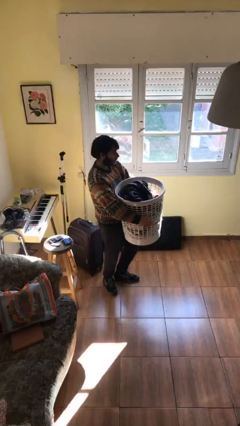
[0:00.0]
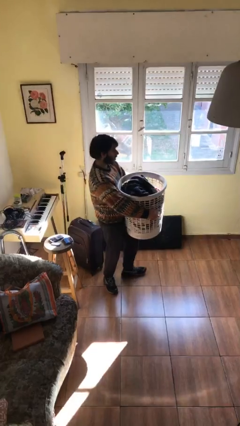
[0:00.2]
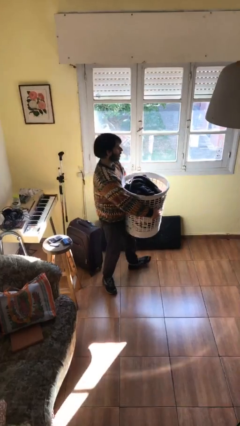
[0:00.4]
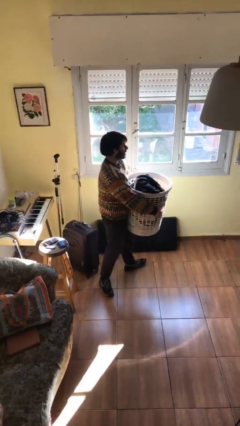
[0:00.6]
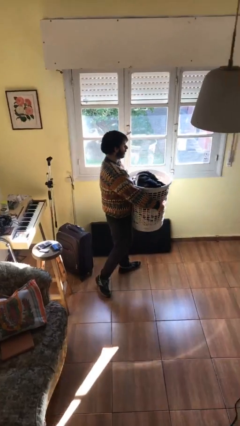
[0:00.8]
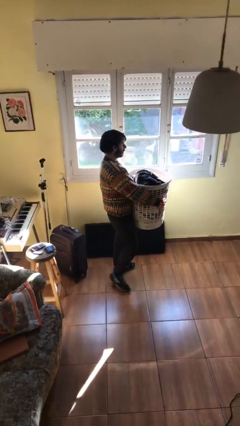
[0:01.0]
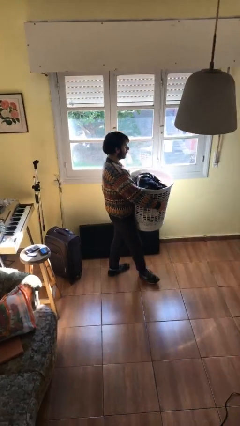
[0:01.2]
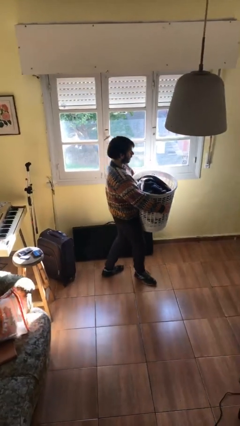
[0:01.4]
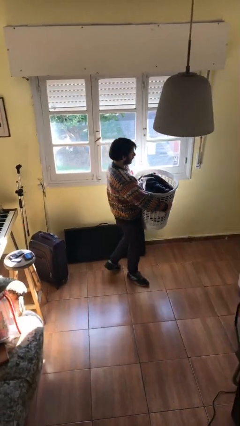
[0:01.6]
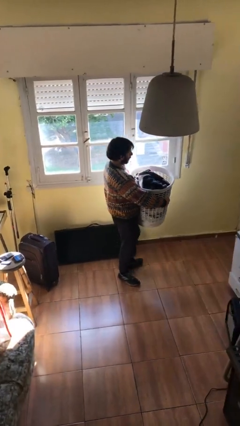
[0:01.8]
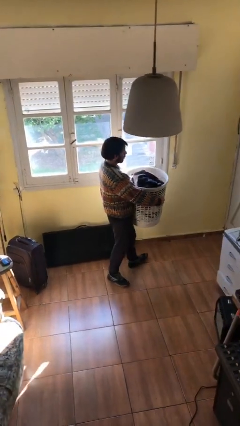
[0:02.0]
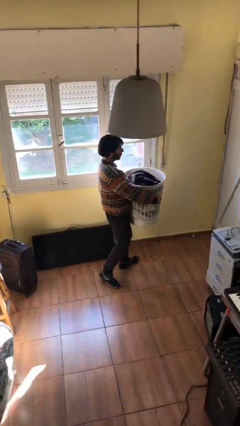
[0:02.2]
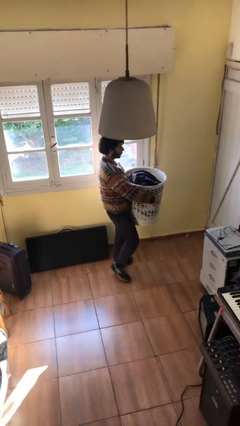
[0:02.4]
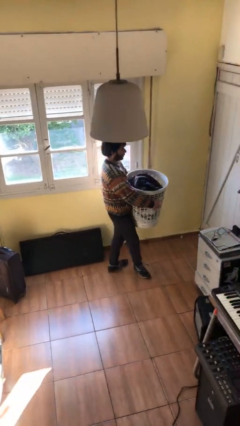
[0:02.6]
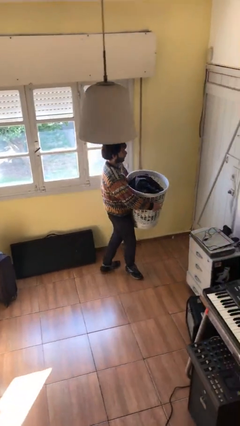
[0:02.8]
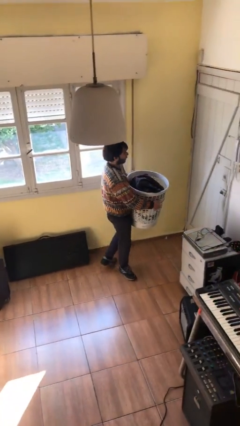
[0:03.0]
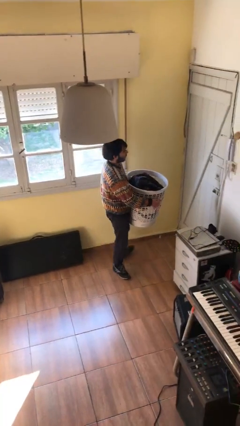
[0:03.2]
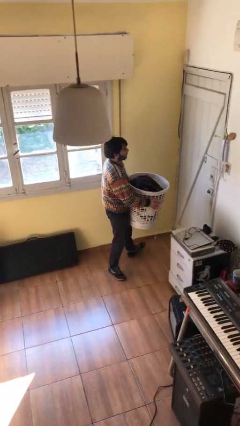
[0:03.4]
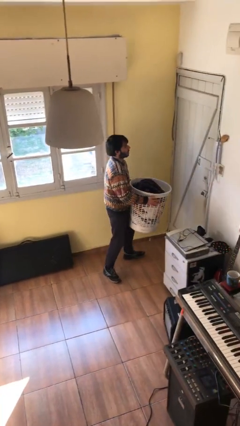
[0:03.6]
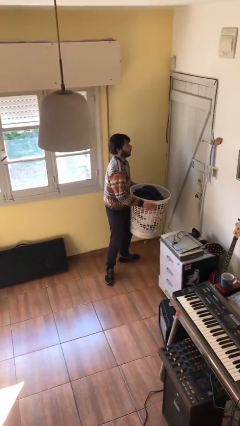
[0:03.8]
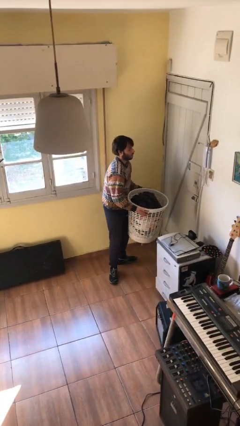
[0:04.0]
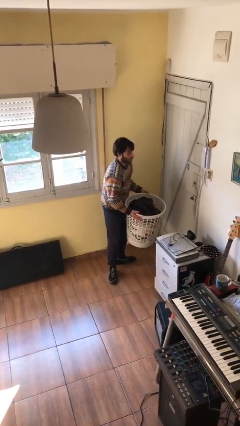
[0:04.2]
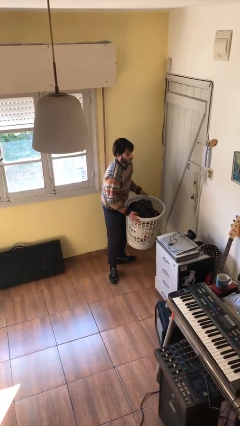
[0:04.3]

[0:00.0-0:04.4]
person carries laundry basket

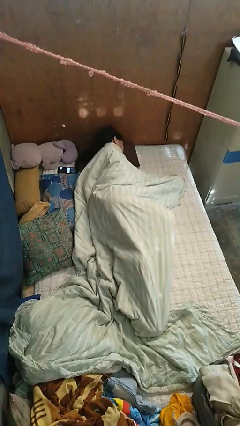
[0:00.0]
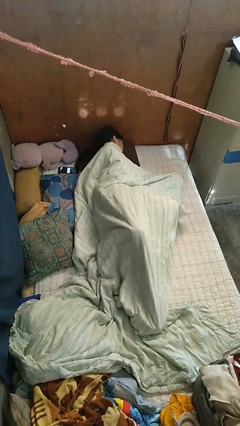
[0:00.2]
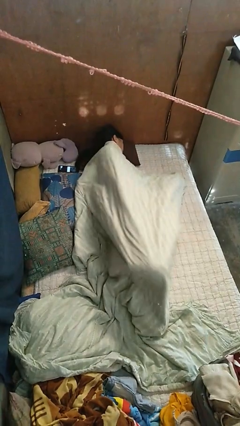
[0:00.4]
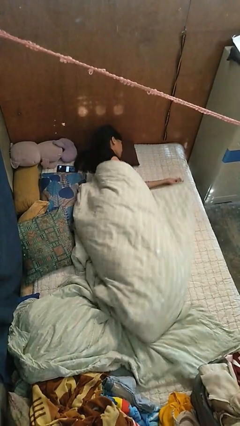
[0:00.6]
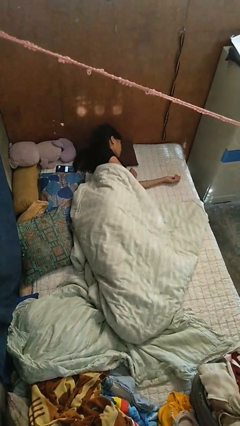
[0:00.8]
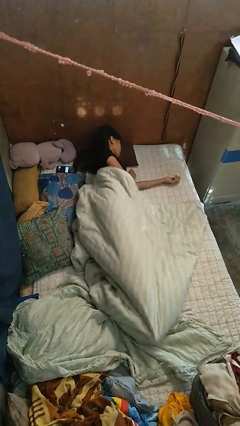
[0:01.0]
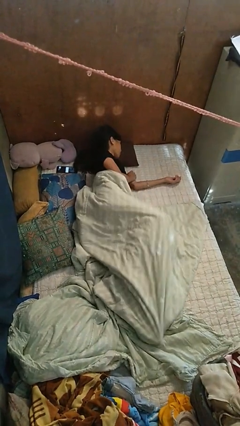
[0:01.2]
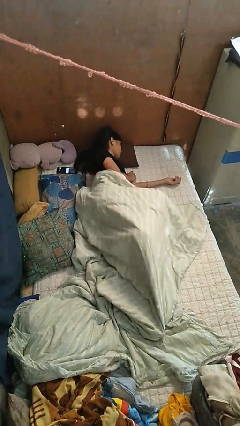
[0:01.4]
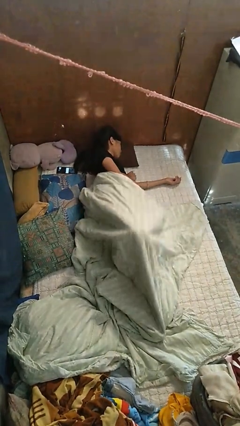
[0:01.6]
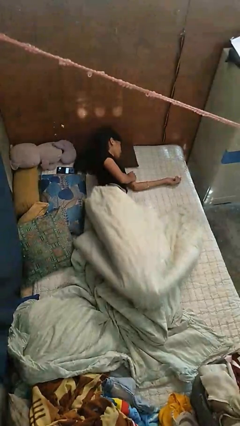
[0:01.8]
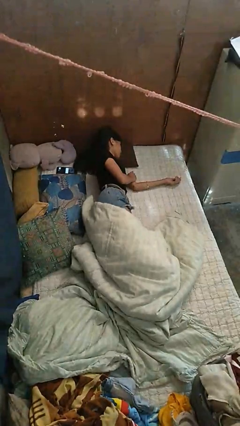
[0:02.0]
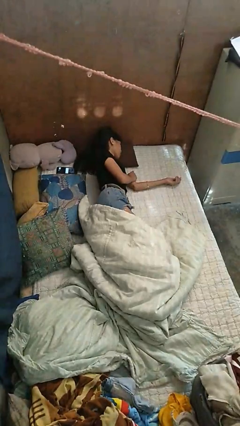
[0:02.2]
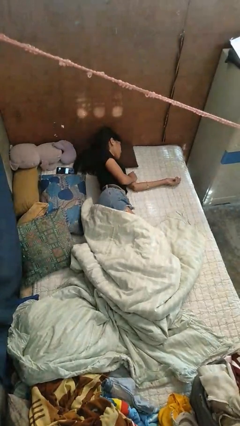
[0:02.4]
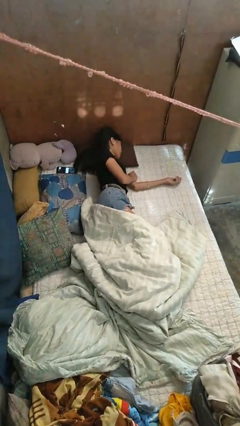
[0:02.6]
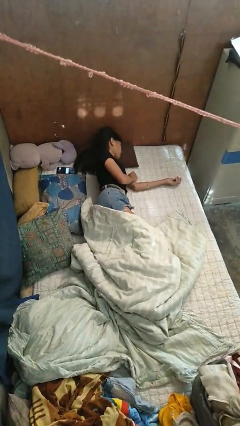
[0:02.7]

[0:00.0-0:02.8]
person uncovers with bedsheets

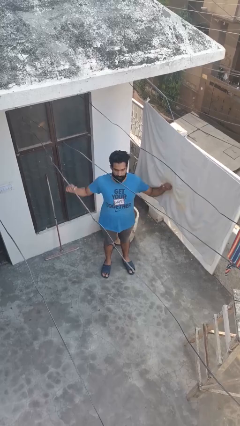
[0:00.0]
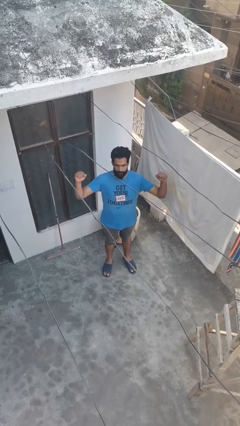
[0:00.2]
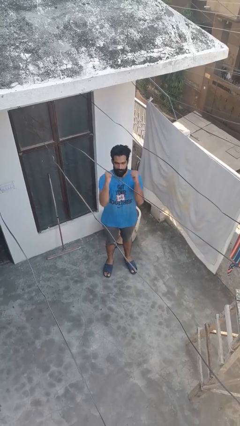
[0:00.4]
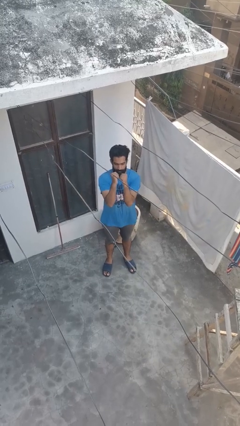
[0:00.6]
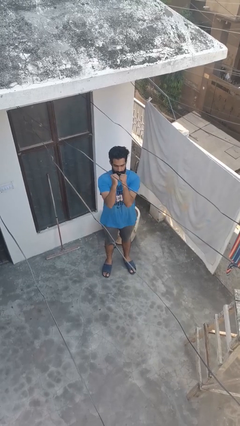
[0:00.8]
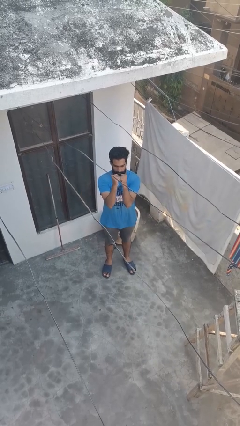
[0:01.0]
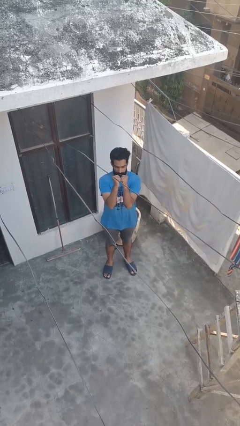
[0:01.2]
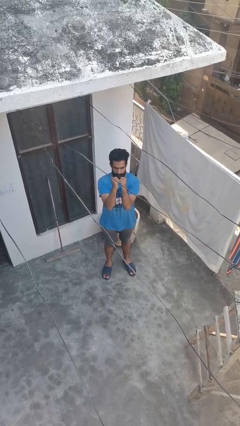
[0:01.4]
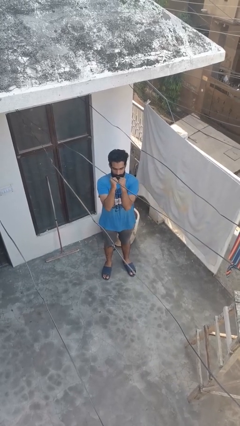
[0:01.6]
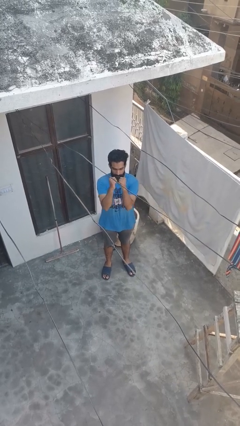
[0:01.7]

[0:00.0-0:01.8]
person gestures zoom in

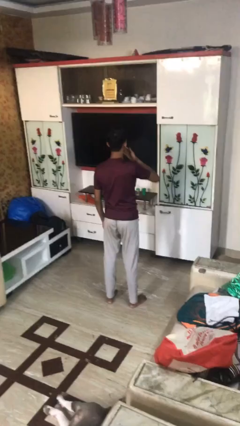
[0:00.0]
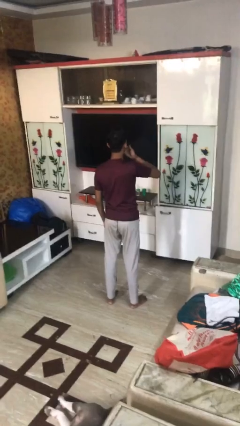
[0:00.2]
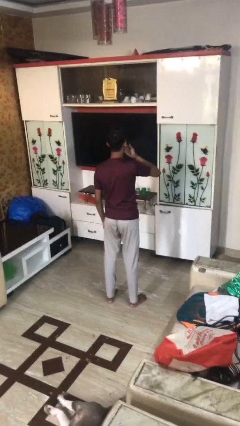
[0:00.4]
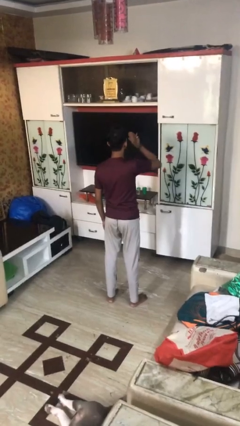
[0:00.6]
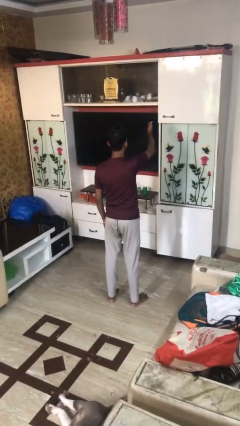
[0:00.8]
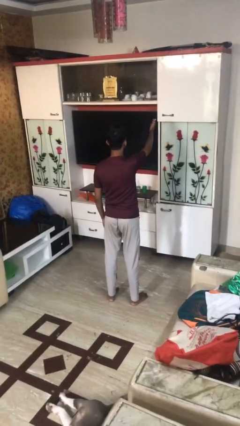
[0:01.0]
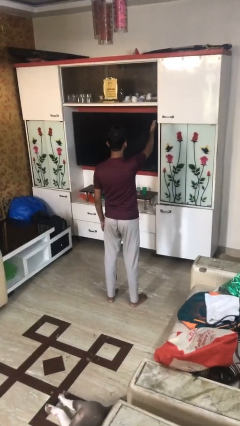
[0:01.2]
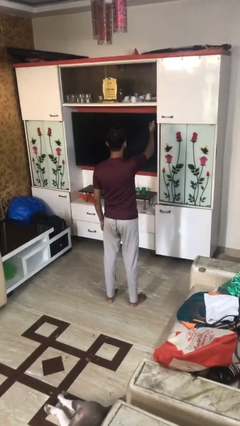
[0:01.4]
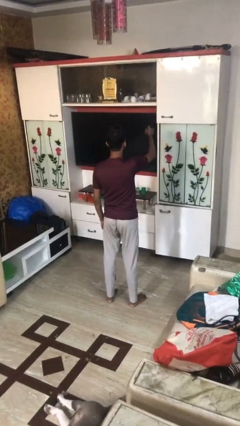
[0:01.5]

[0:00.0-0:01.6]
person gestures blow kiss

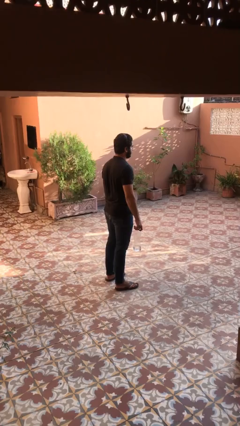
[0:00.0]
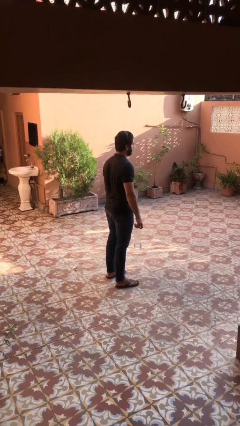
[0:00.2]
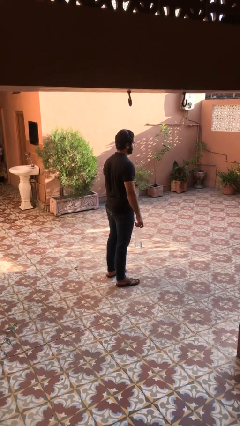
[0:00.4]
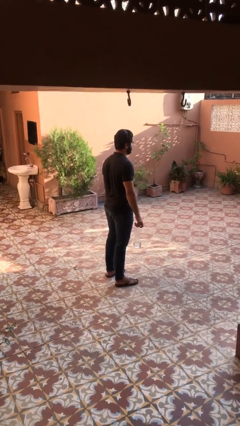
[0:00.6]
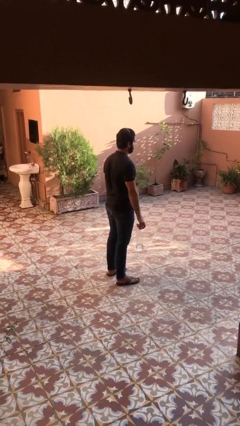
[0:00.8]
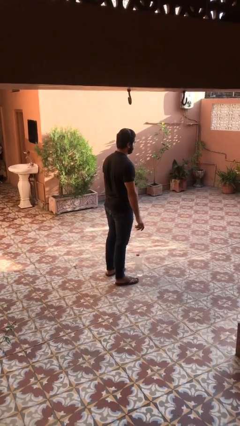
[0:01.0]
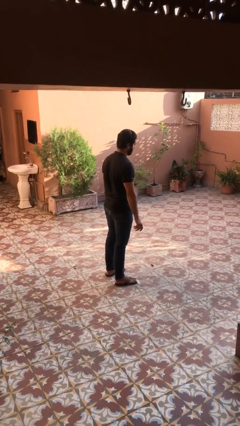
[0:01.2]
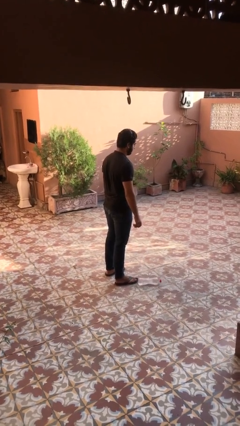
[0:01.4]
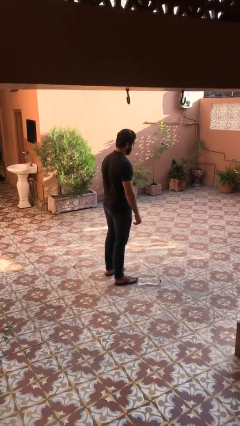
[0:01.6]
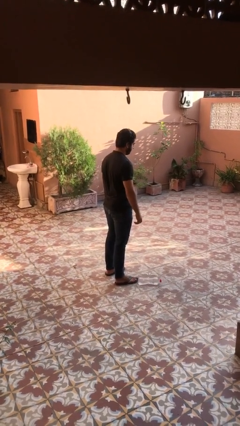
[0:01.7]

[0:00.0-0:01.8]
person throws object into air

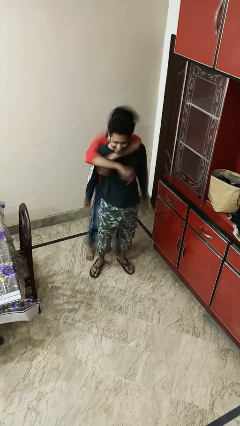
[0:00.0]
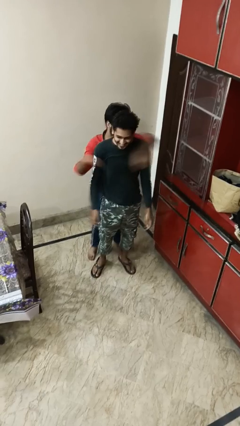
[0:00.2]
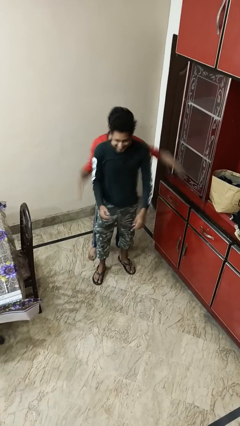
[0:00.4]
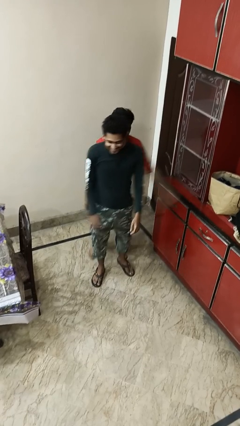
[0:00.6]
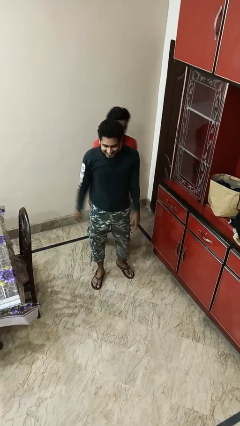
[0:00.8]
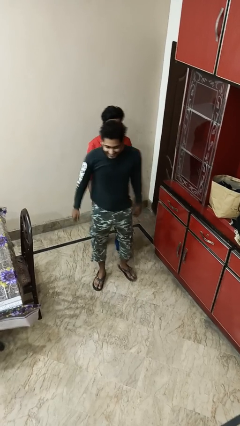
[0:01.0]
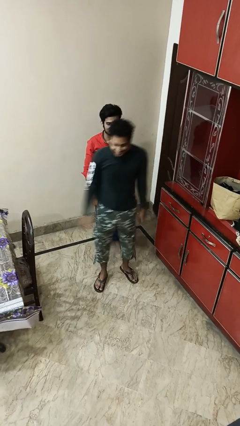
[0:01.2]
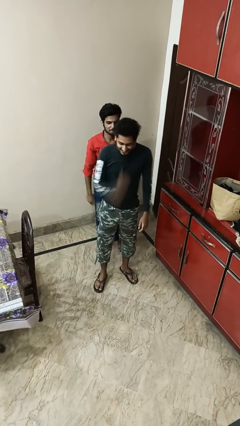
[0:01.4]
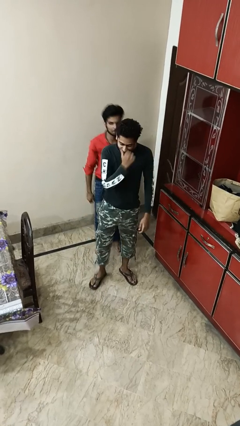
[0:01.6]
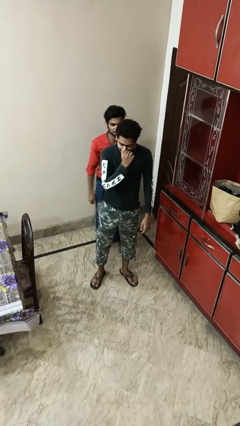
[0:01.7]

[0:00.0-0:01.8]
person puts down person

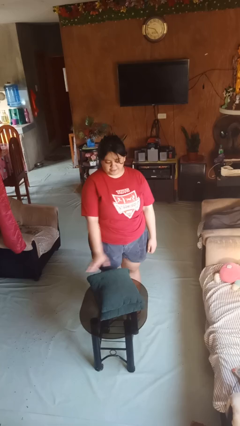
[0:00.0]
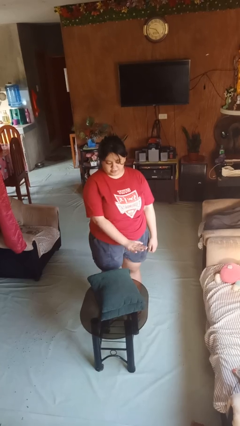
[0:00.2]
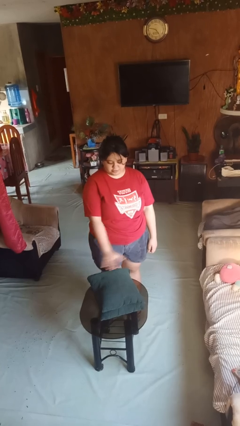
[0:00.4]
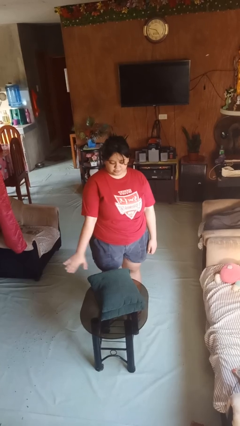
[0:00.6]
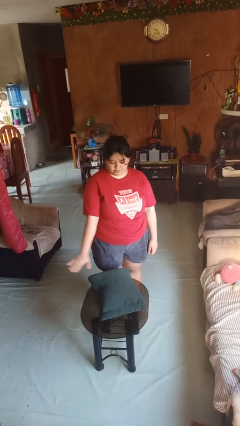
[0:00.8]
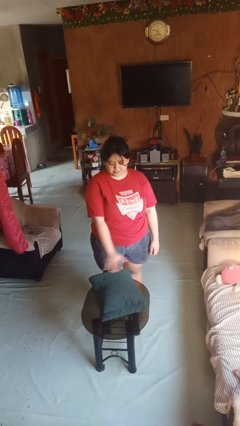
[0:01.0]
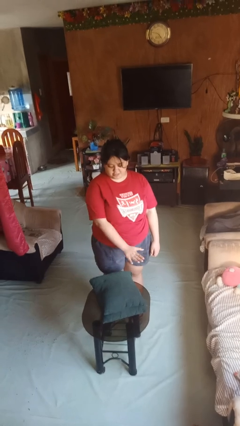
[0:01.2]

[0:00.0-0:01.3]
person waves hand over object

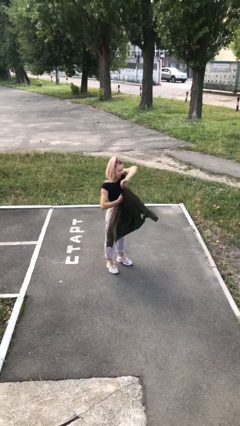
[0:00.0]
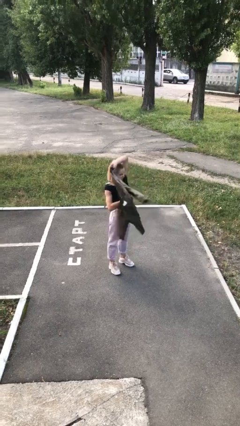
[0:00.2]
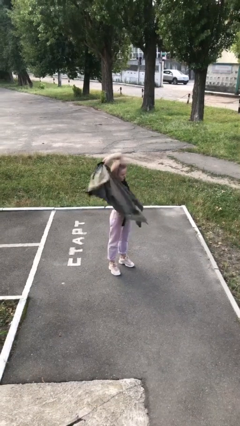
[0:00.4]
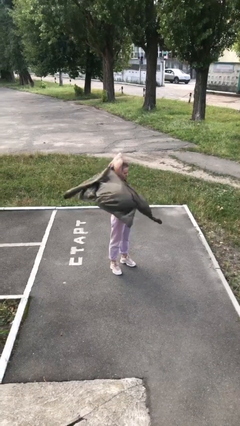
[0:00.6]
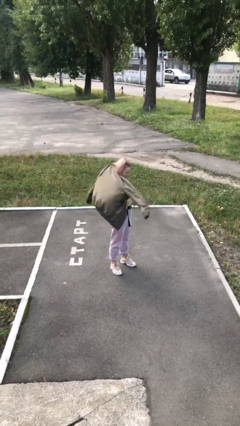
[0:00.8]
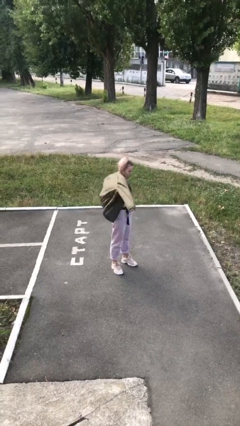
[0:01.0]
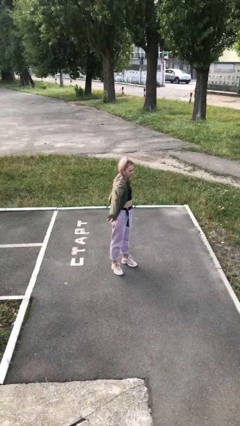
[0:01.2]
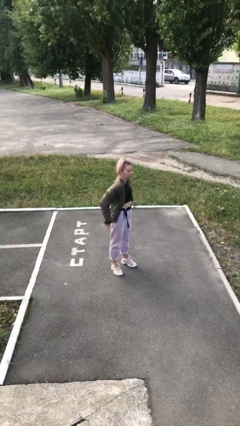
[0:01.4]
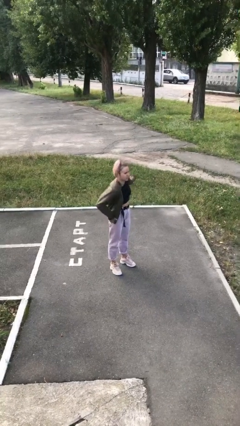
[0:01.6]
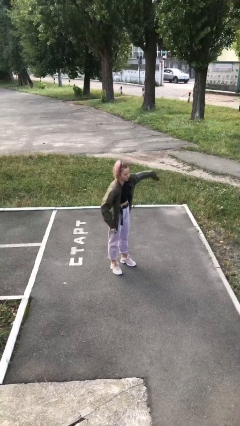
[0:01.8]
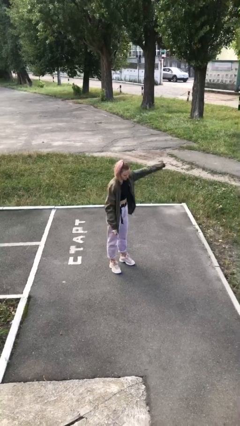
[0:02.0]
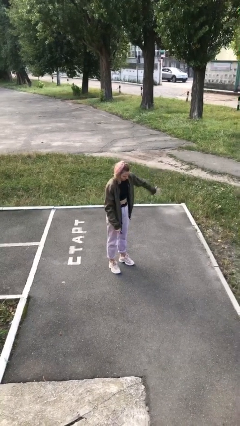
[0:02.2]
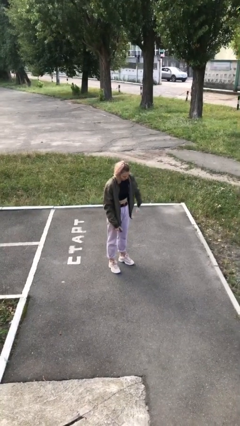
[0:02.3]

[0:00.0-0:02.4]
person puts on jacket
